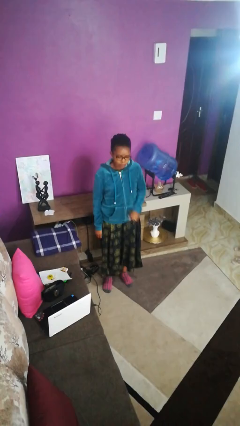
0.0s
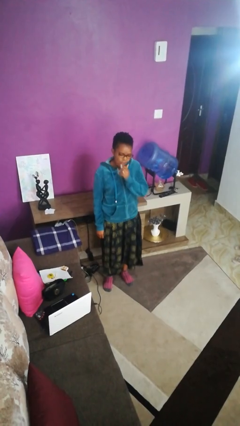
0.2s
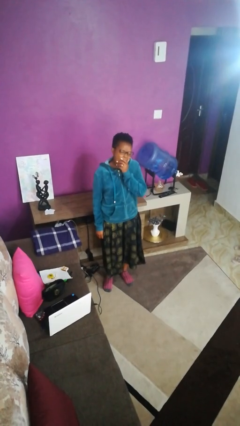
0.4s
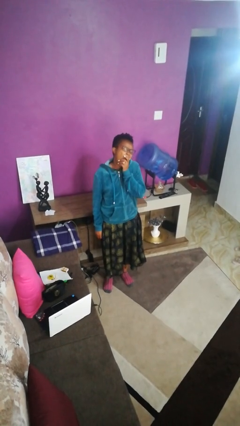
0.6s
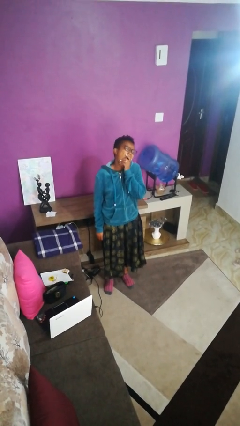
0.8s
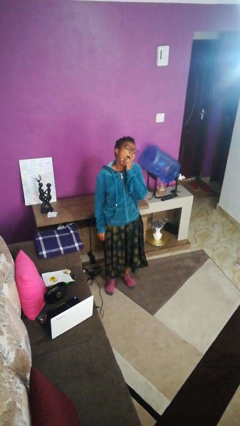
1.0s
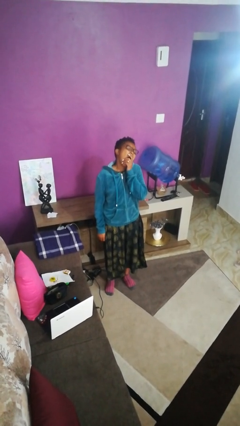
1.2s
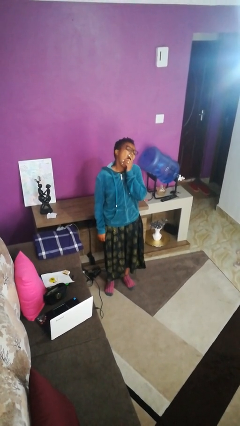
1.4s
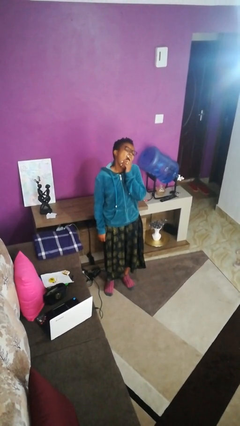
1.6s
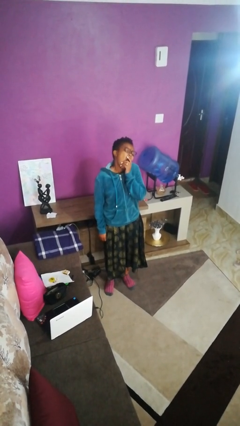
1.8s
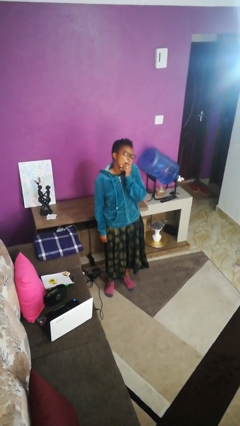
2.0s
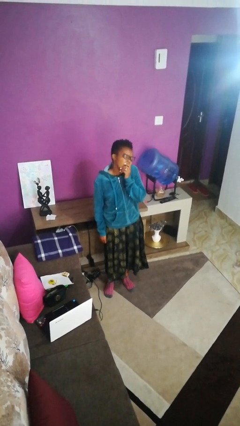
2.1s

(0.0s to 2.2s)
person yawns

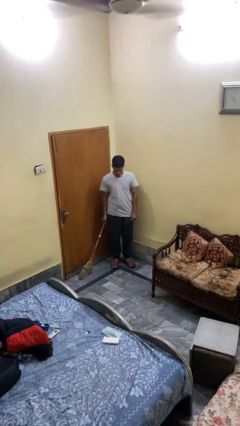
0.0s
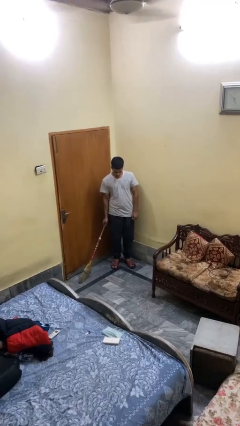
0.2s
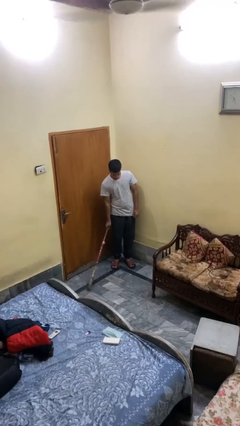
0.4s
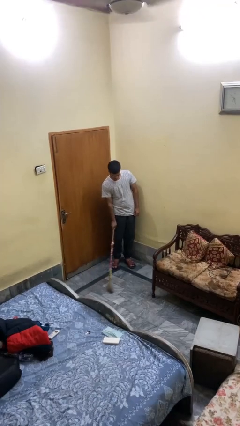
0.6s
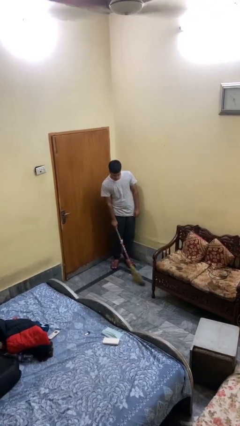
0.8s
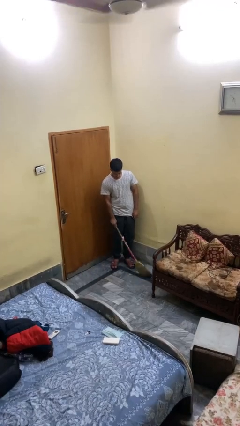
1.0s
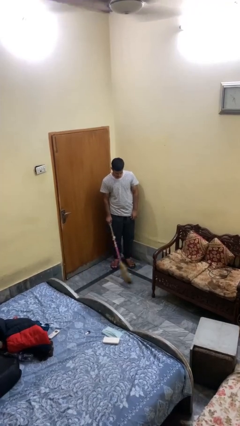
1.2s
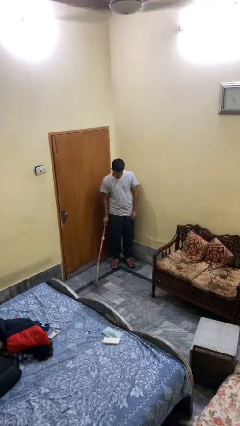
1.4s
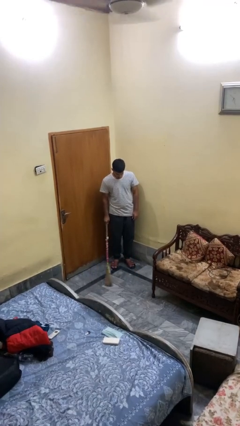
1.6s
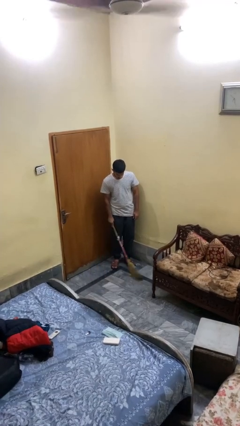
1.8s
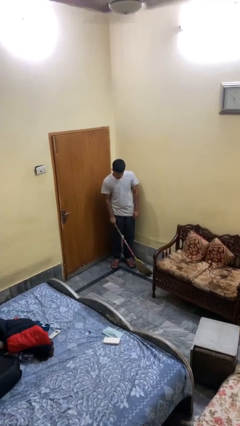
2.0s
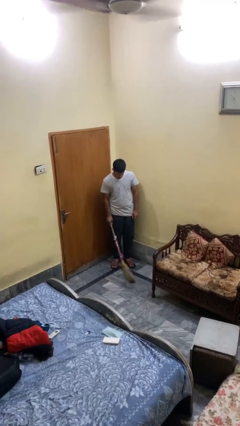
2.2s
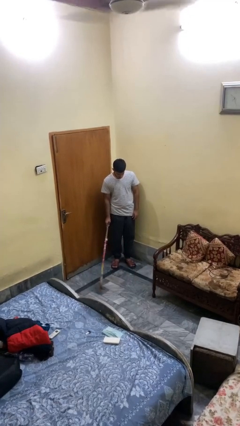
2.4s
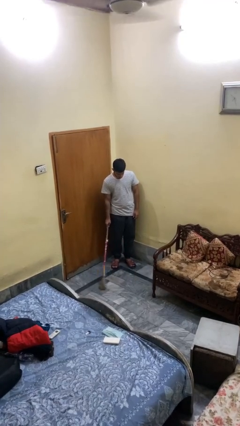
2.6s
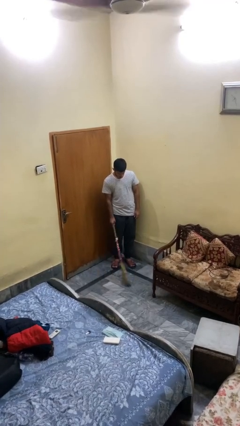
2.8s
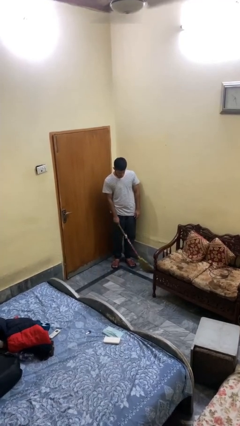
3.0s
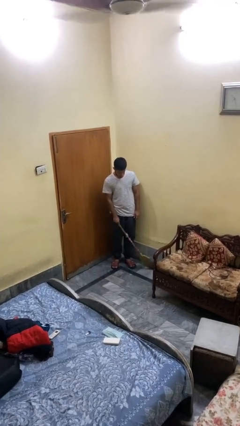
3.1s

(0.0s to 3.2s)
person sweeps floor

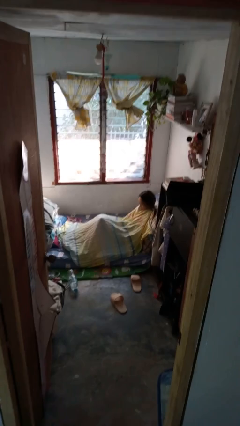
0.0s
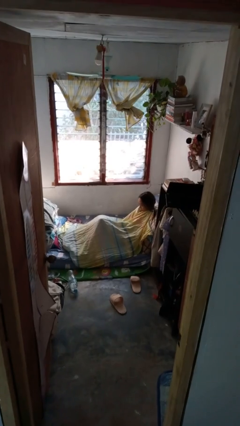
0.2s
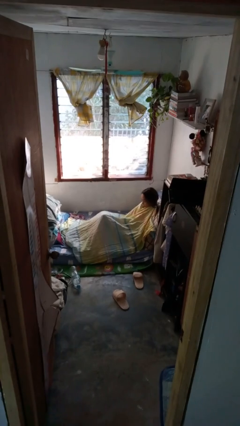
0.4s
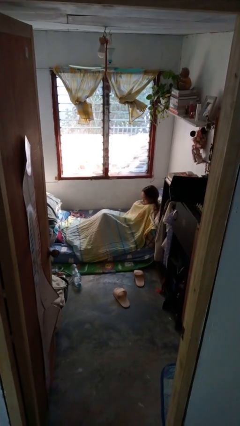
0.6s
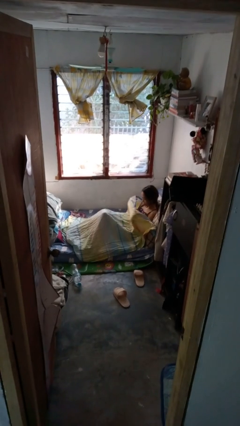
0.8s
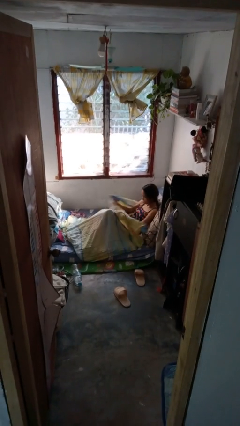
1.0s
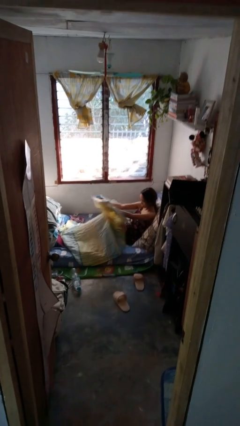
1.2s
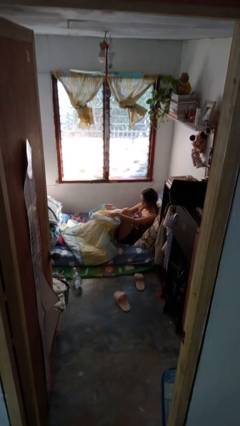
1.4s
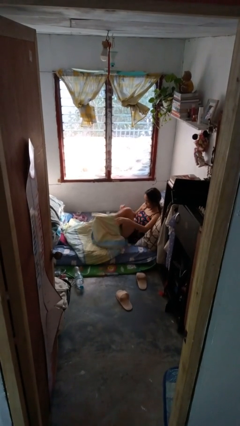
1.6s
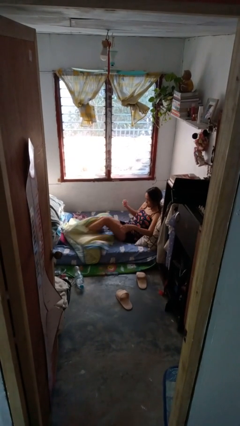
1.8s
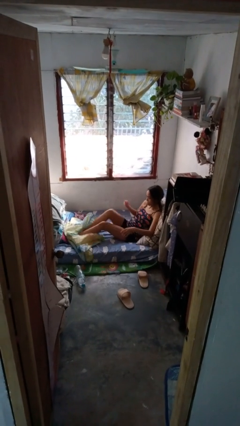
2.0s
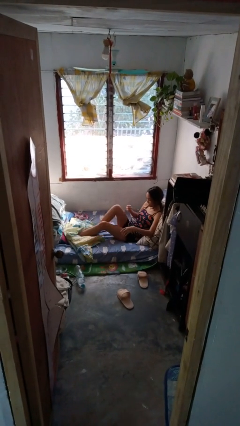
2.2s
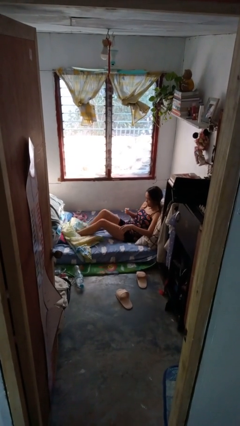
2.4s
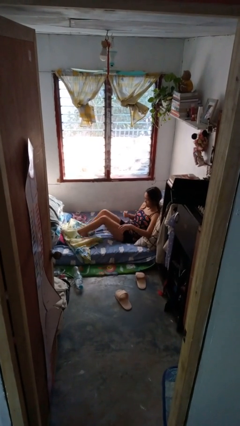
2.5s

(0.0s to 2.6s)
person uncovers with bedsheets

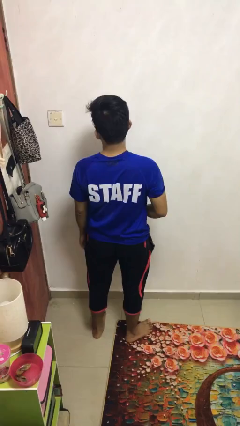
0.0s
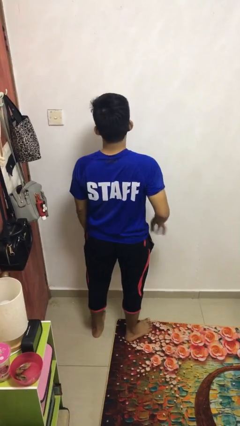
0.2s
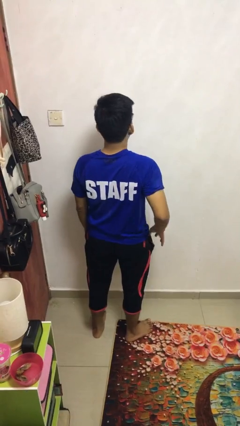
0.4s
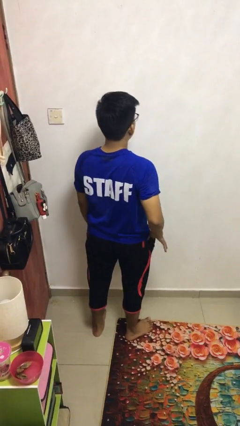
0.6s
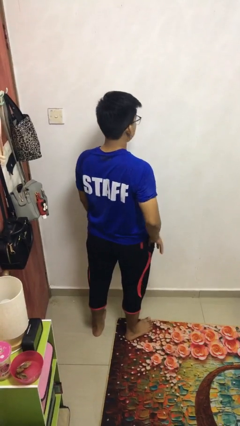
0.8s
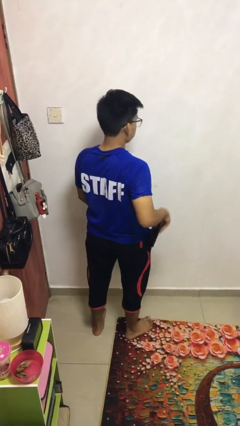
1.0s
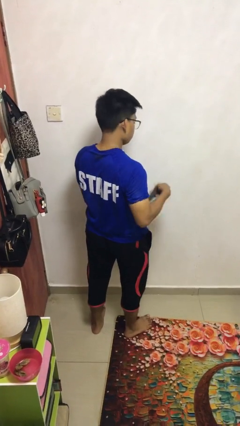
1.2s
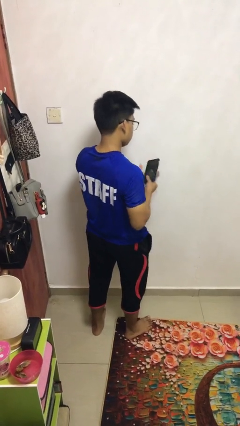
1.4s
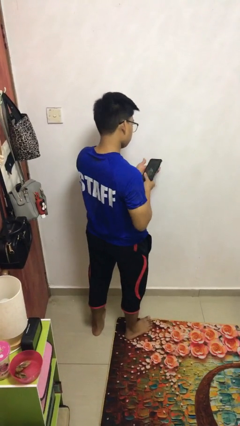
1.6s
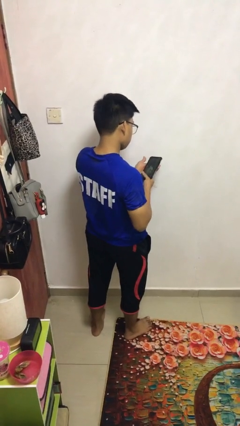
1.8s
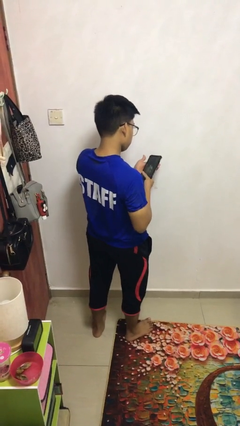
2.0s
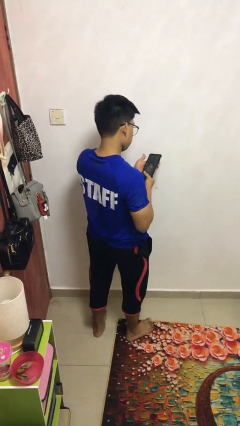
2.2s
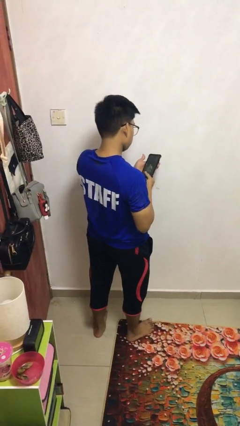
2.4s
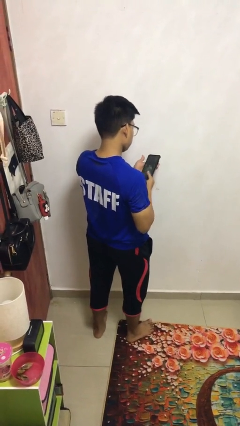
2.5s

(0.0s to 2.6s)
person takes phone from pocket

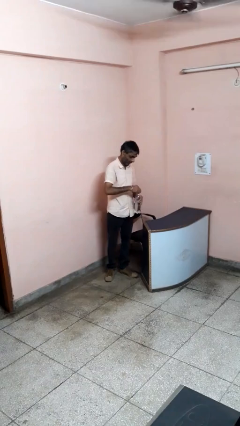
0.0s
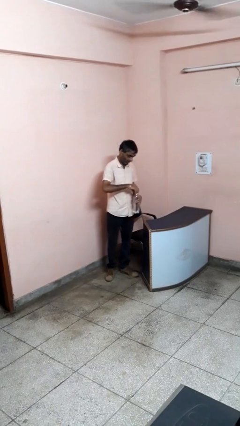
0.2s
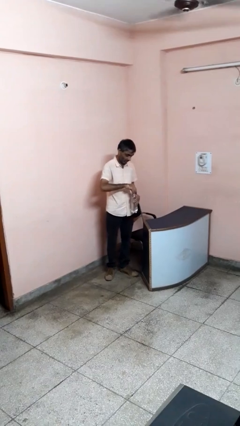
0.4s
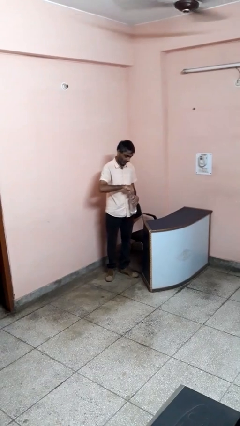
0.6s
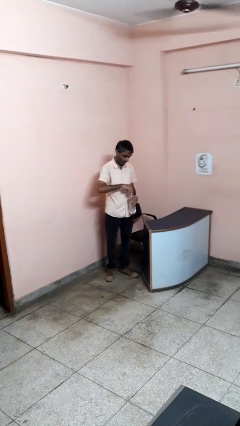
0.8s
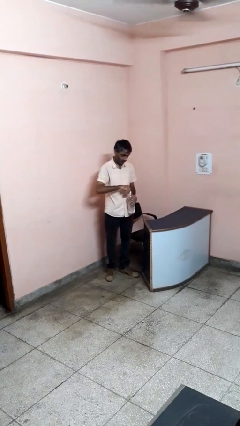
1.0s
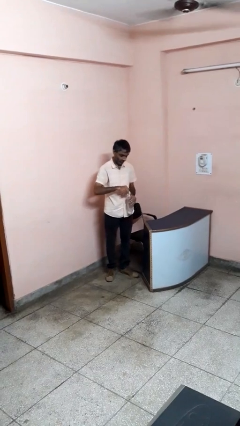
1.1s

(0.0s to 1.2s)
person screws lid to bottle

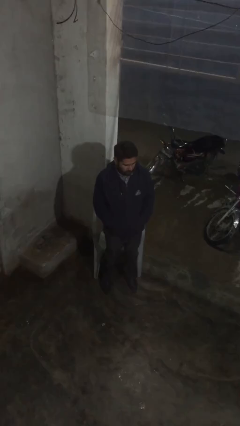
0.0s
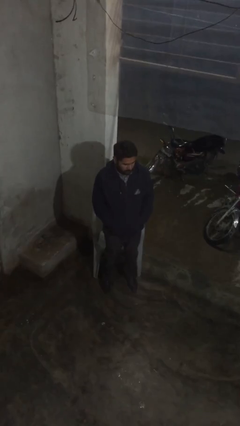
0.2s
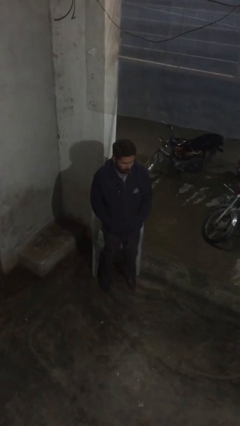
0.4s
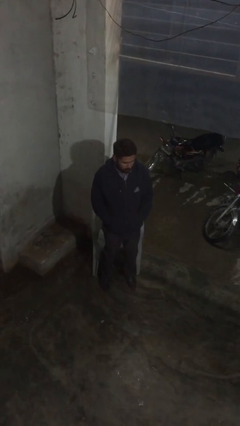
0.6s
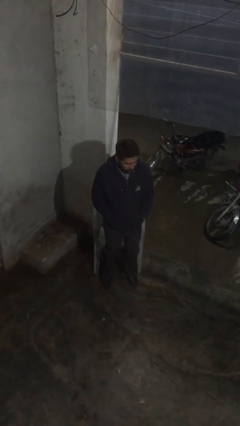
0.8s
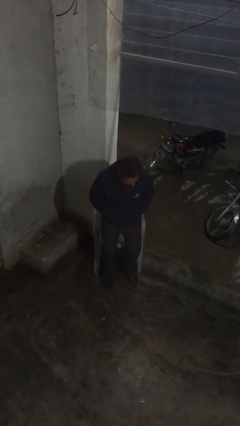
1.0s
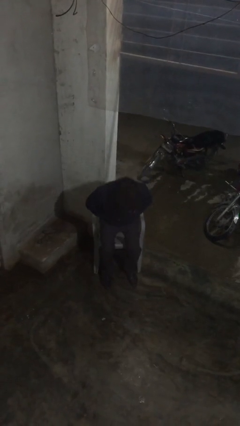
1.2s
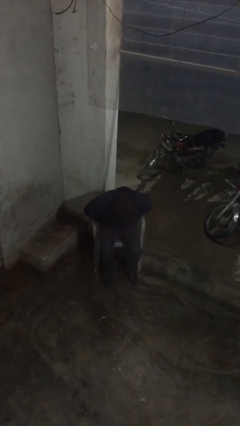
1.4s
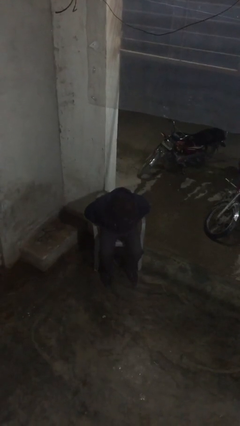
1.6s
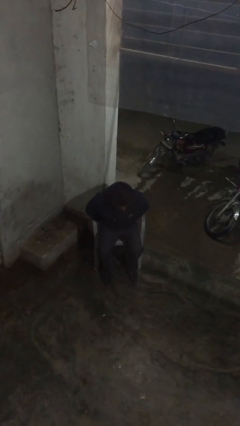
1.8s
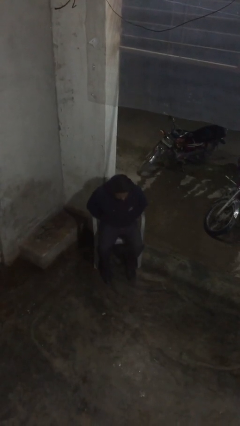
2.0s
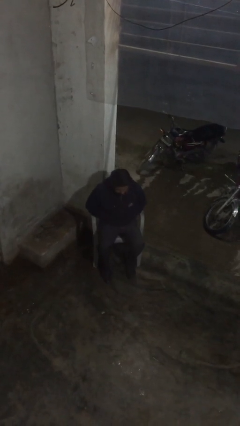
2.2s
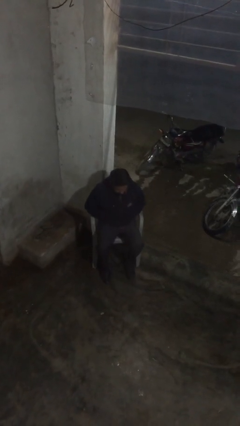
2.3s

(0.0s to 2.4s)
person sits down

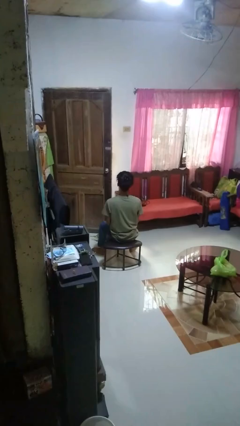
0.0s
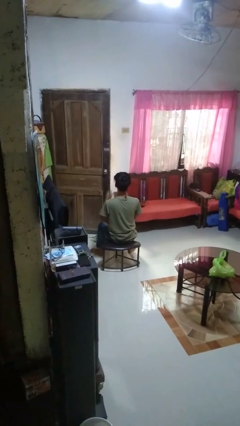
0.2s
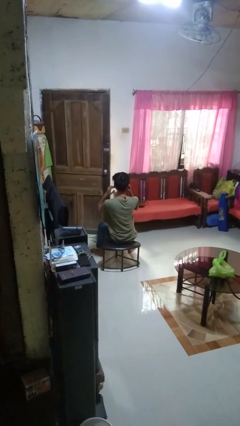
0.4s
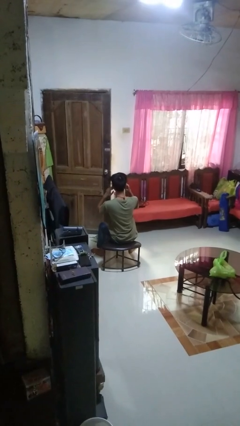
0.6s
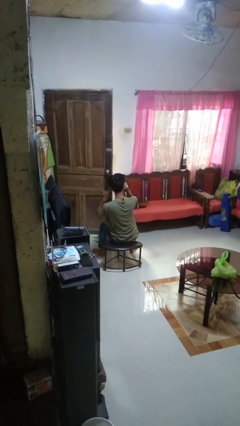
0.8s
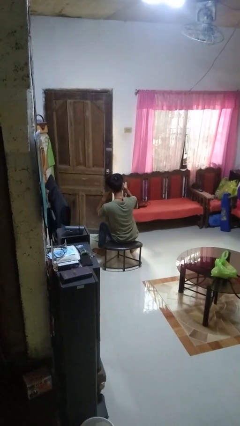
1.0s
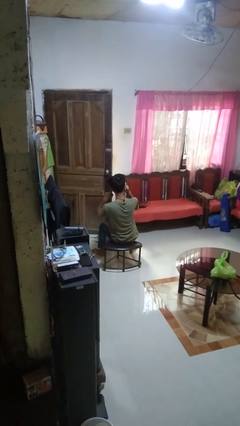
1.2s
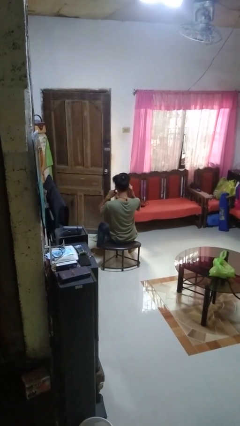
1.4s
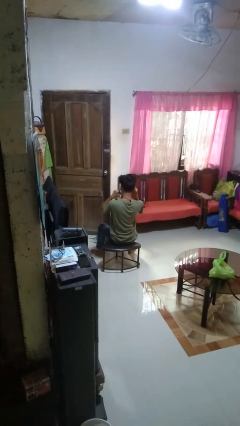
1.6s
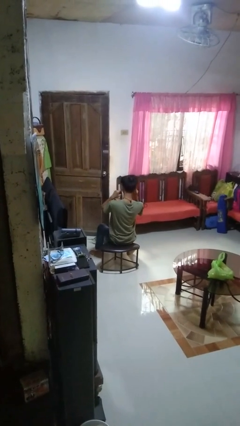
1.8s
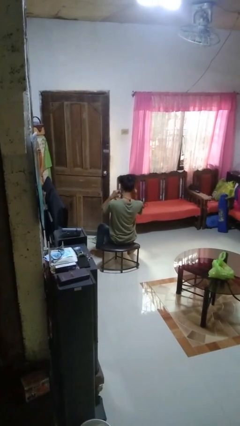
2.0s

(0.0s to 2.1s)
person puts fingers in ear

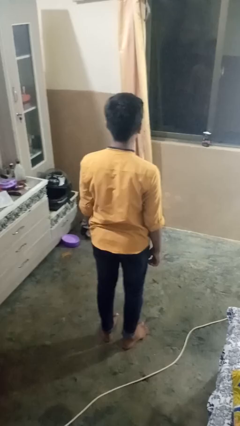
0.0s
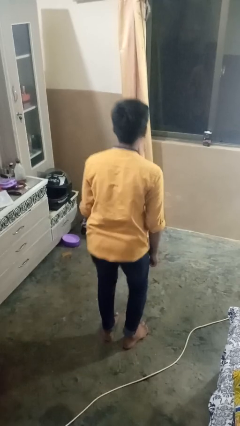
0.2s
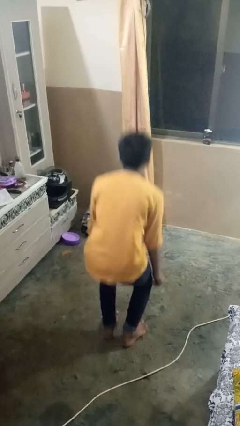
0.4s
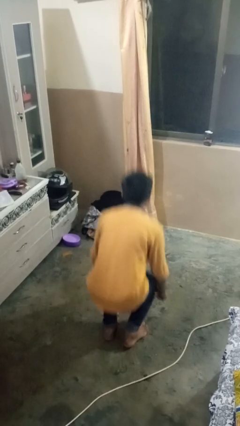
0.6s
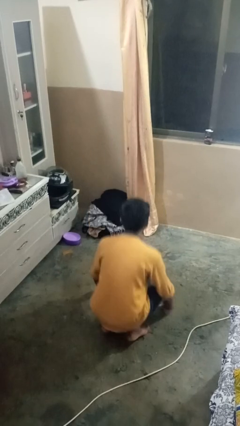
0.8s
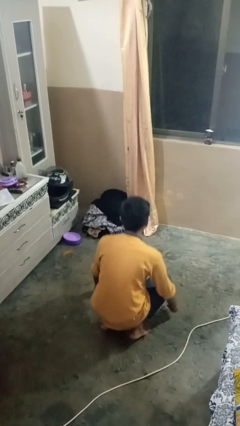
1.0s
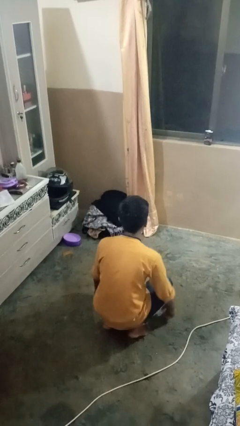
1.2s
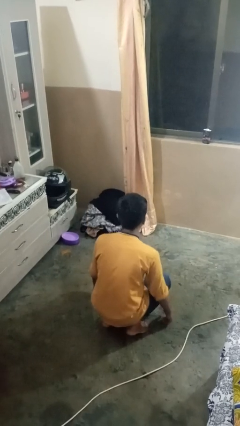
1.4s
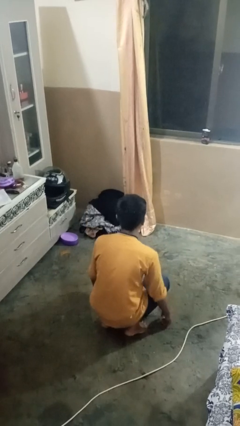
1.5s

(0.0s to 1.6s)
person exercises with situp
